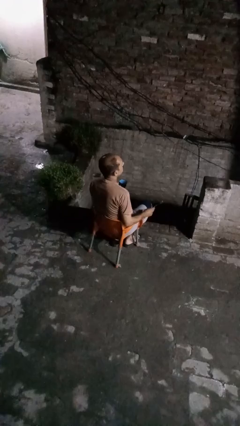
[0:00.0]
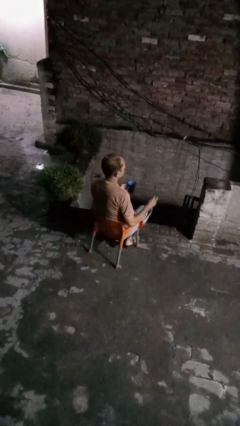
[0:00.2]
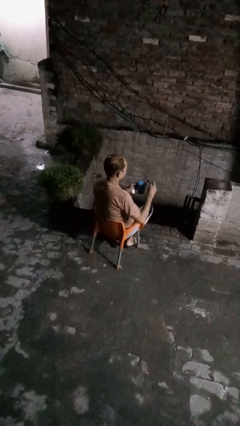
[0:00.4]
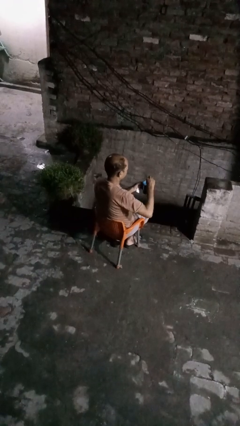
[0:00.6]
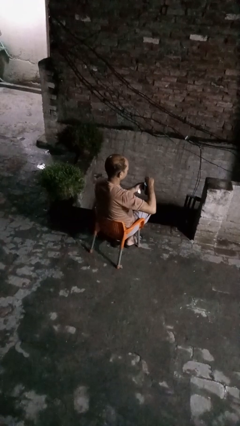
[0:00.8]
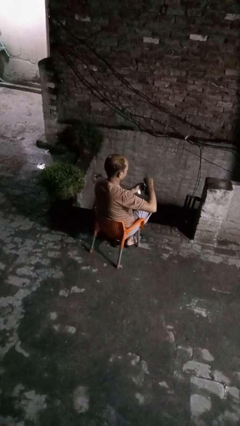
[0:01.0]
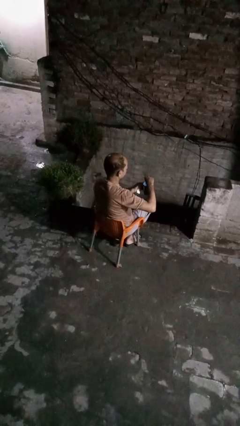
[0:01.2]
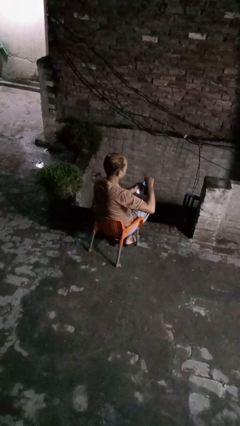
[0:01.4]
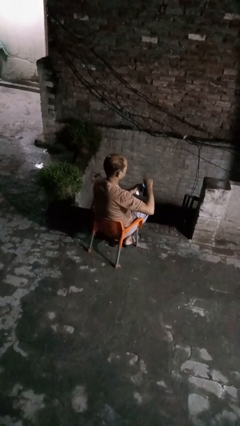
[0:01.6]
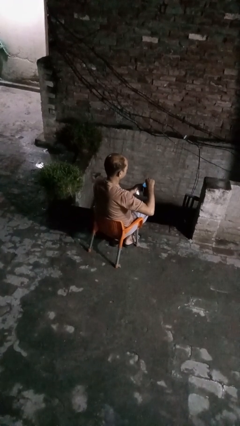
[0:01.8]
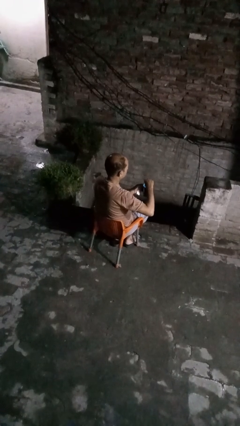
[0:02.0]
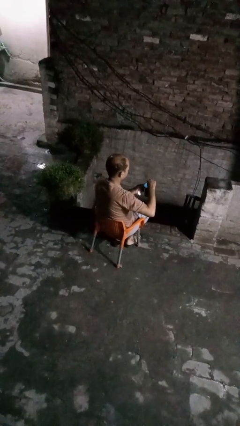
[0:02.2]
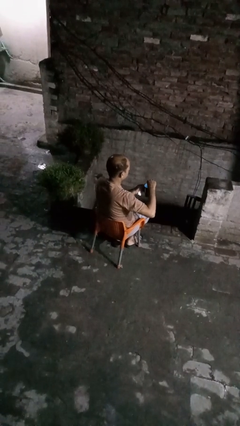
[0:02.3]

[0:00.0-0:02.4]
person stirs mug

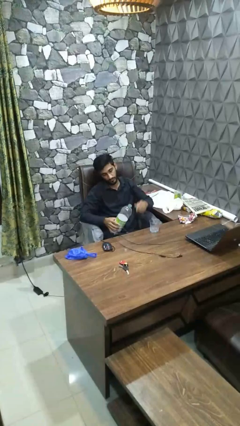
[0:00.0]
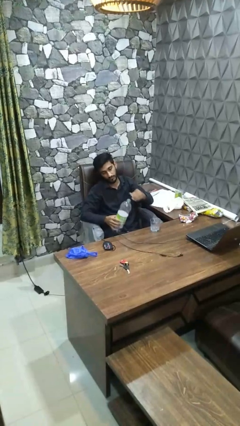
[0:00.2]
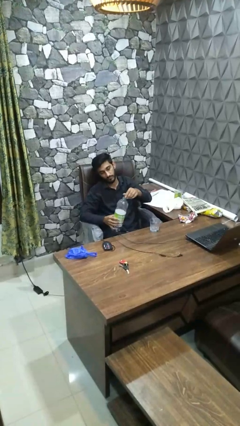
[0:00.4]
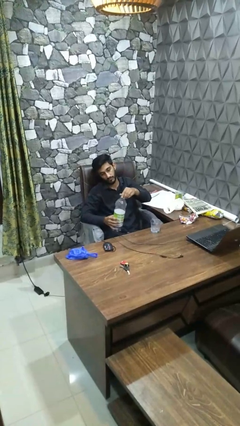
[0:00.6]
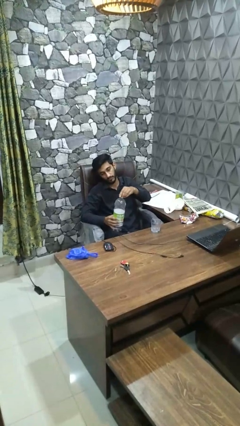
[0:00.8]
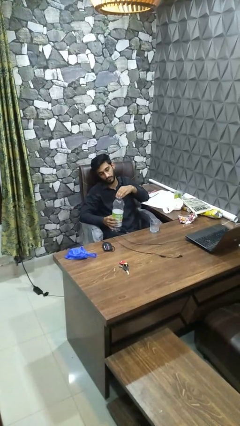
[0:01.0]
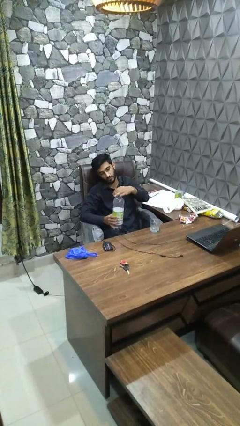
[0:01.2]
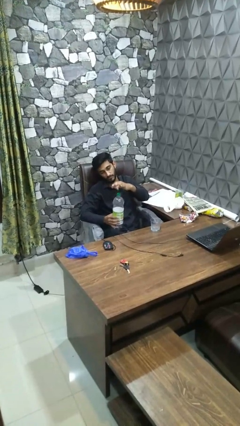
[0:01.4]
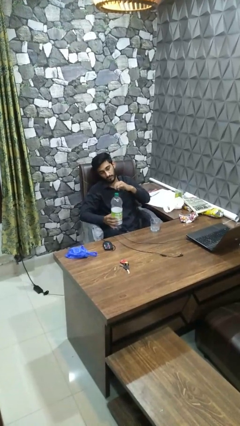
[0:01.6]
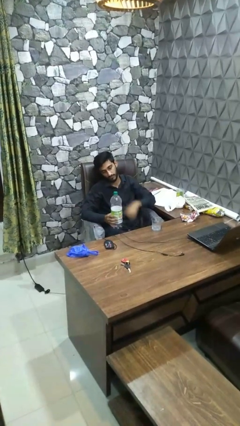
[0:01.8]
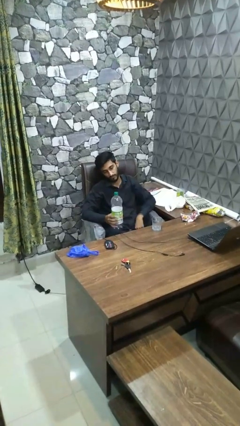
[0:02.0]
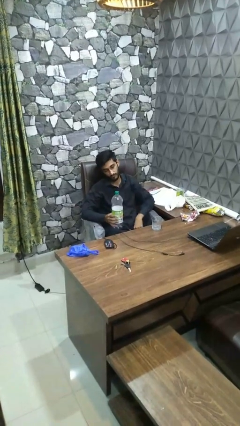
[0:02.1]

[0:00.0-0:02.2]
person screws lid to bottle

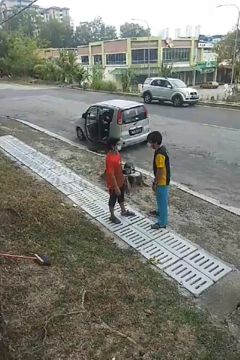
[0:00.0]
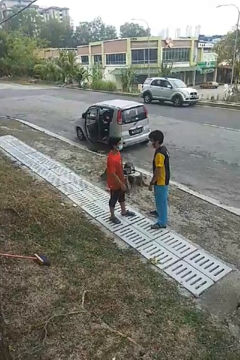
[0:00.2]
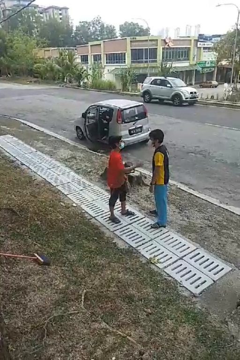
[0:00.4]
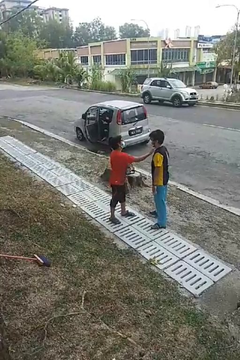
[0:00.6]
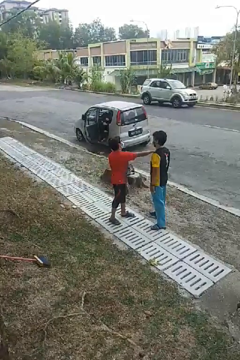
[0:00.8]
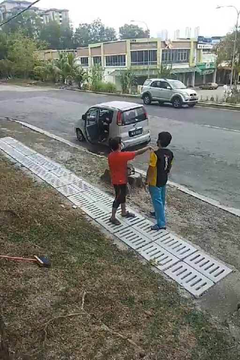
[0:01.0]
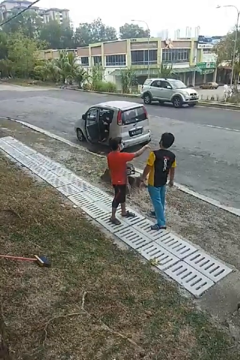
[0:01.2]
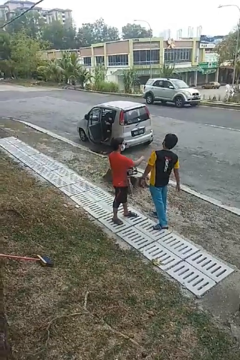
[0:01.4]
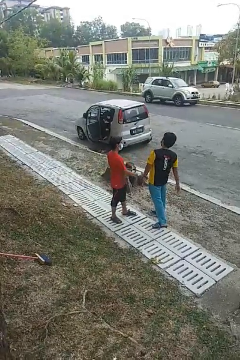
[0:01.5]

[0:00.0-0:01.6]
person shoves person

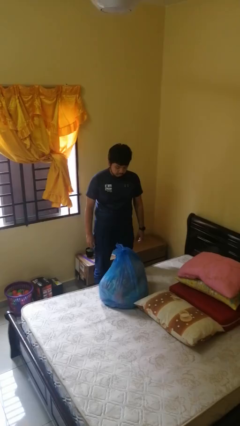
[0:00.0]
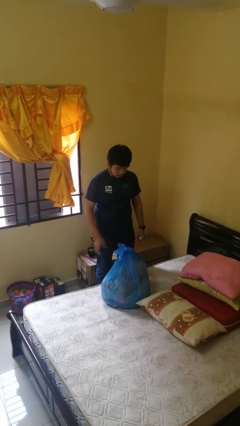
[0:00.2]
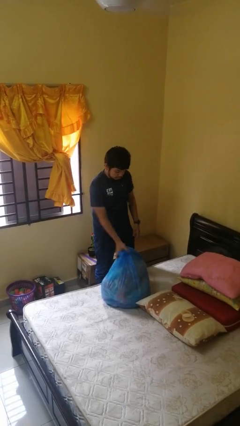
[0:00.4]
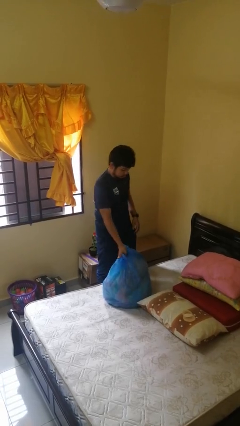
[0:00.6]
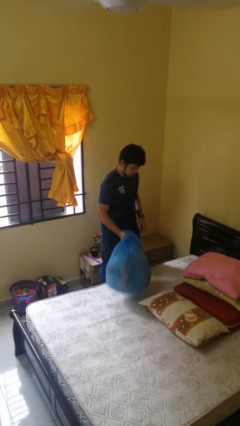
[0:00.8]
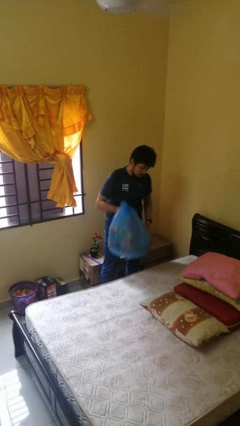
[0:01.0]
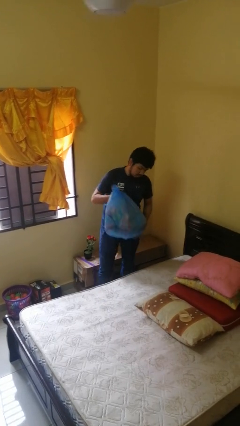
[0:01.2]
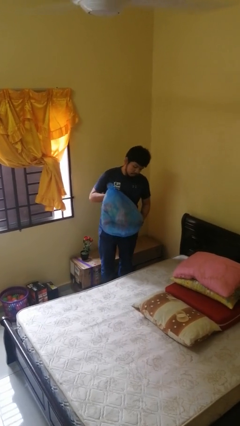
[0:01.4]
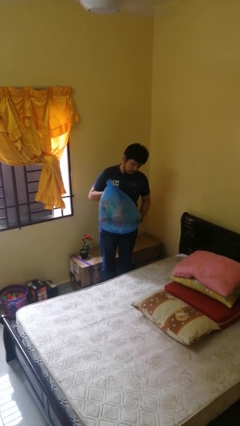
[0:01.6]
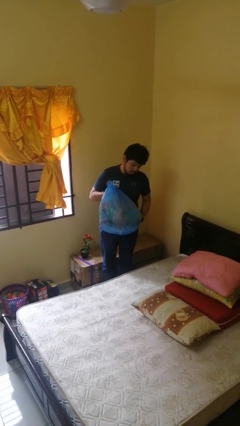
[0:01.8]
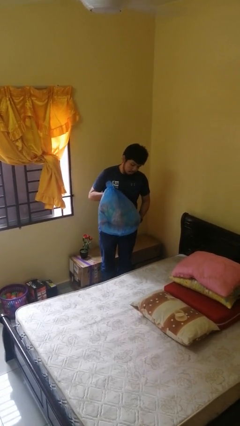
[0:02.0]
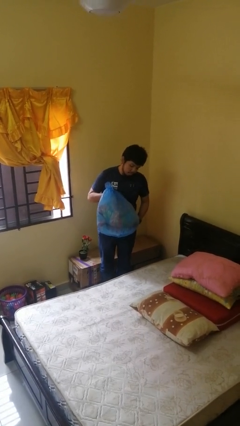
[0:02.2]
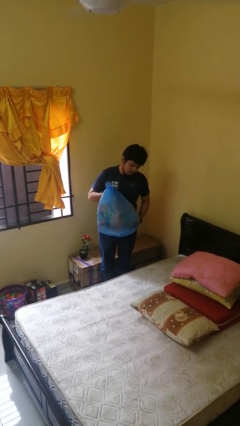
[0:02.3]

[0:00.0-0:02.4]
person picks up object from bed

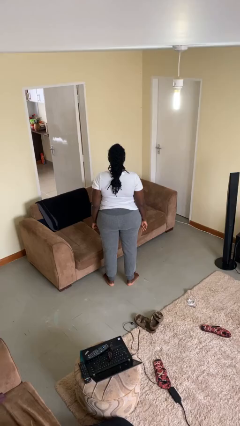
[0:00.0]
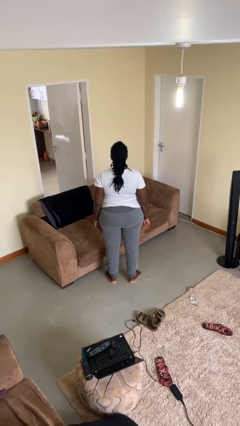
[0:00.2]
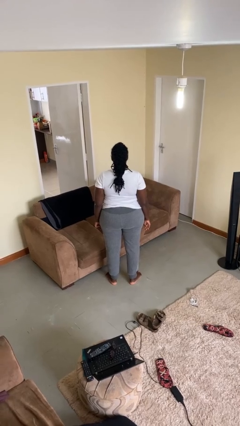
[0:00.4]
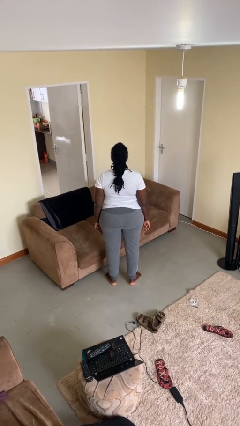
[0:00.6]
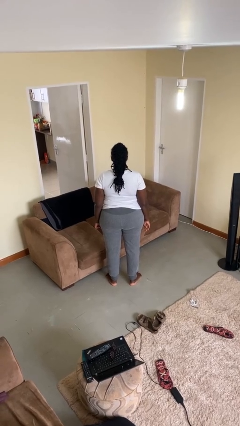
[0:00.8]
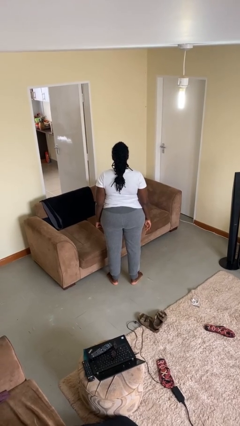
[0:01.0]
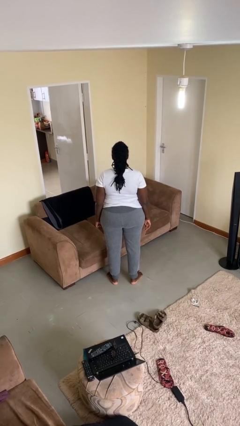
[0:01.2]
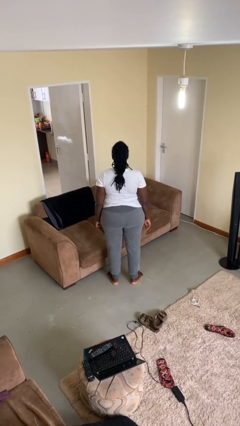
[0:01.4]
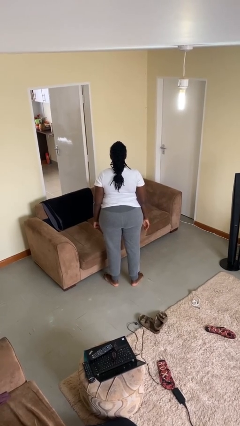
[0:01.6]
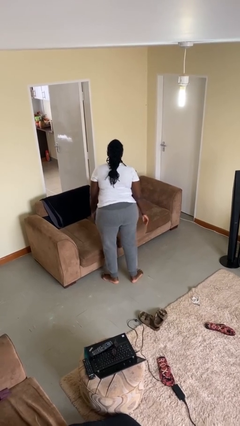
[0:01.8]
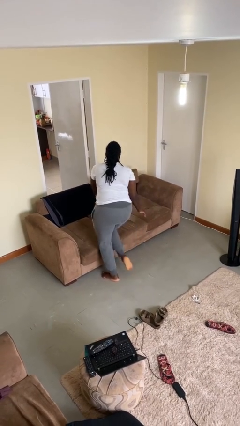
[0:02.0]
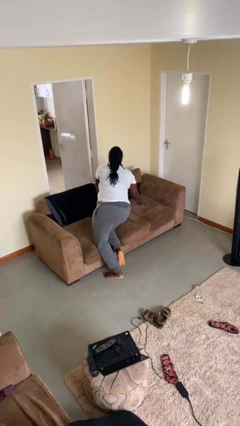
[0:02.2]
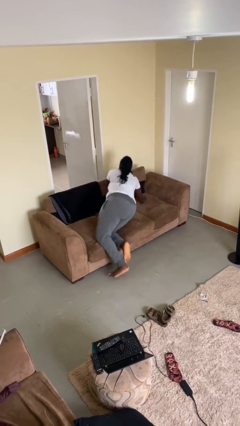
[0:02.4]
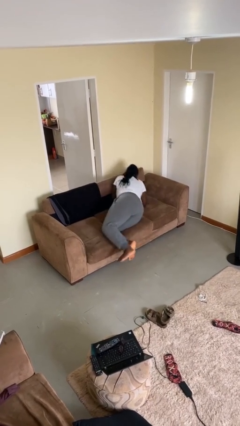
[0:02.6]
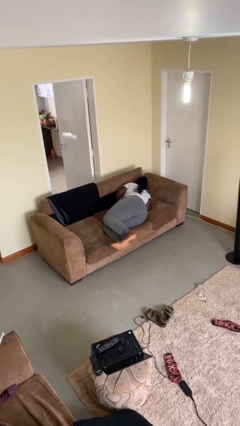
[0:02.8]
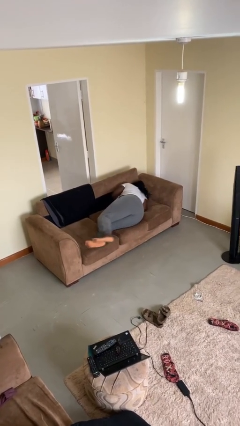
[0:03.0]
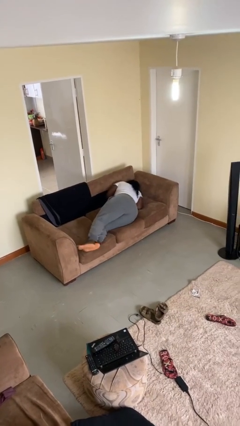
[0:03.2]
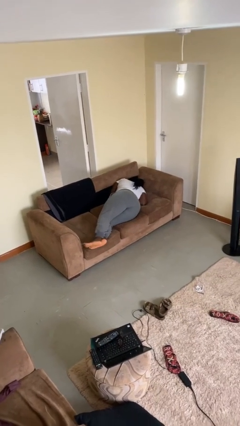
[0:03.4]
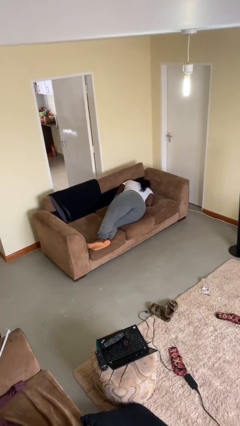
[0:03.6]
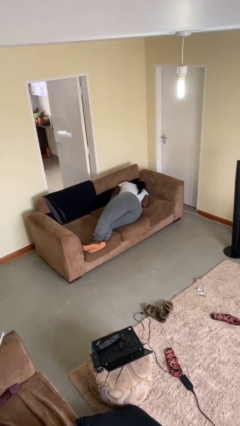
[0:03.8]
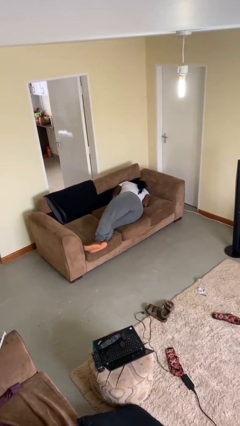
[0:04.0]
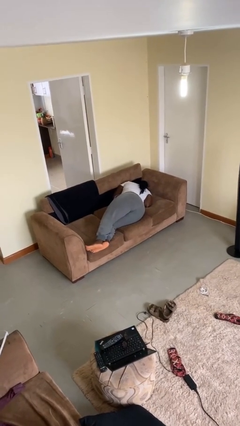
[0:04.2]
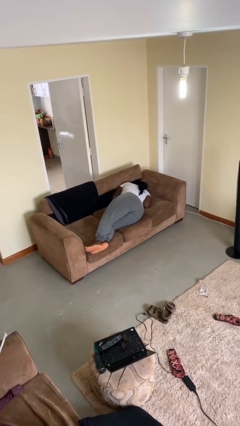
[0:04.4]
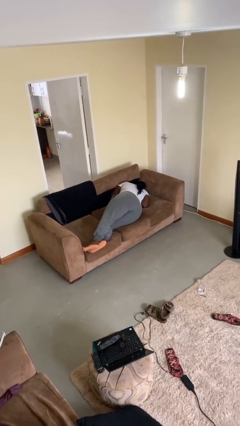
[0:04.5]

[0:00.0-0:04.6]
person lies down on couch

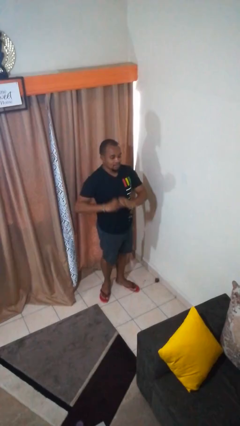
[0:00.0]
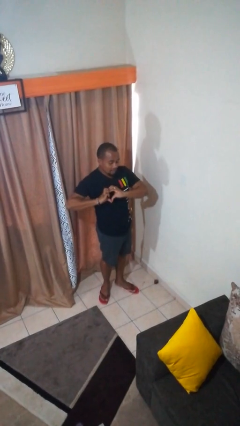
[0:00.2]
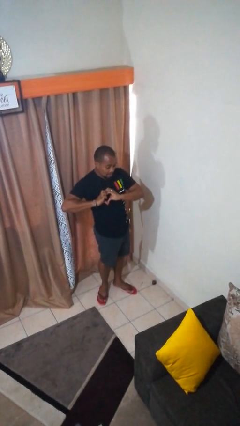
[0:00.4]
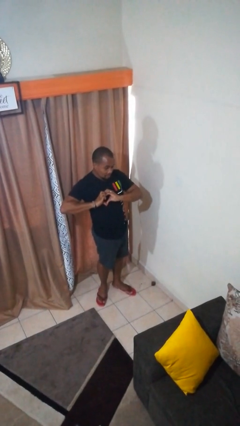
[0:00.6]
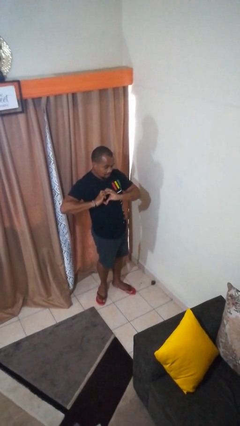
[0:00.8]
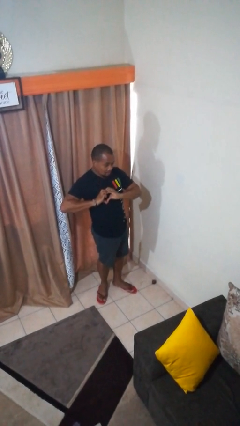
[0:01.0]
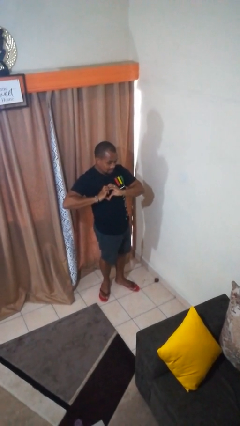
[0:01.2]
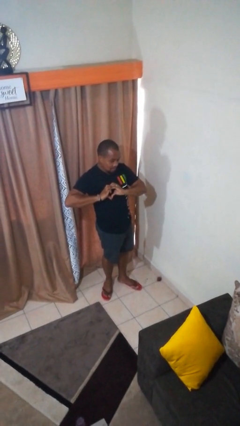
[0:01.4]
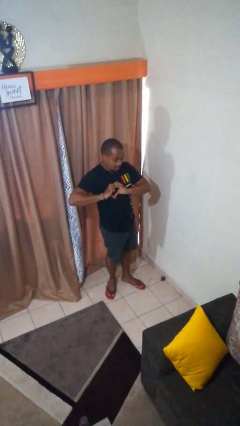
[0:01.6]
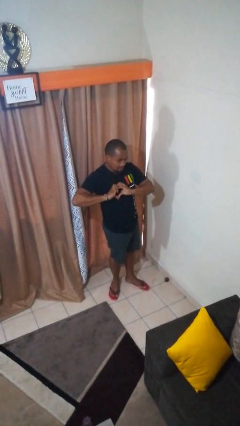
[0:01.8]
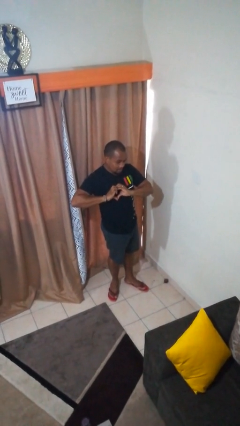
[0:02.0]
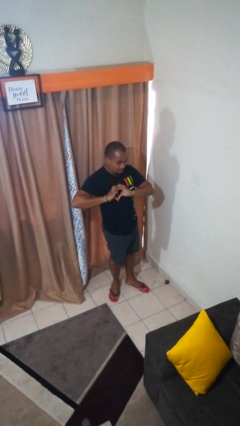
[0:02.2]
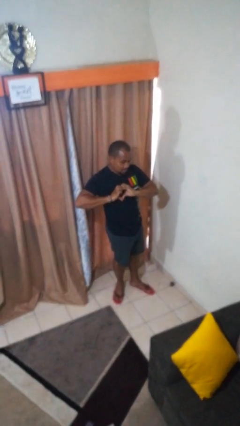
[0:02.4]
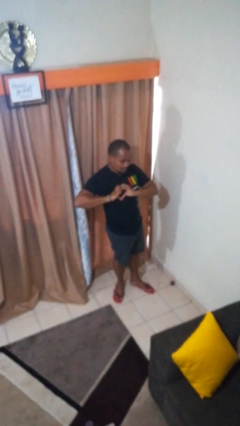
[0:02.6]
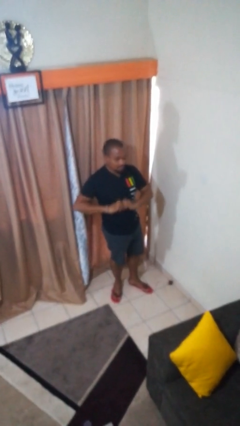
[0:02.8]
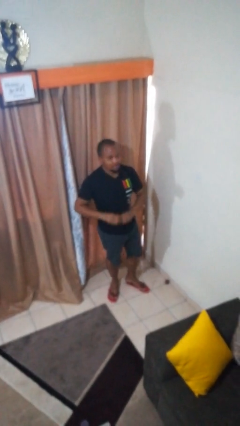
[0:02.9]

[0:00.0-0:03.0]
person gestures heart

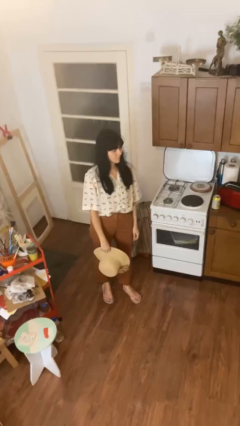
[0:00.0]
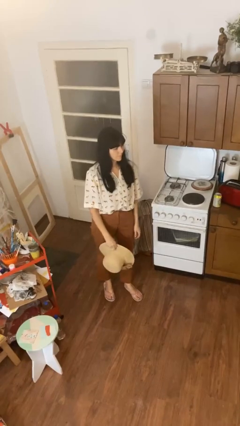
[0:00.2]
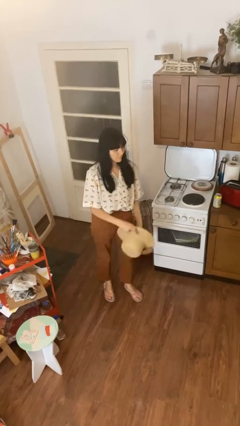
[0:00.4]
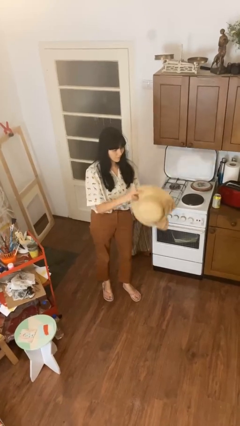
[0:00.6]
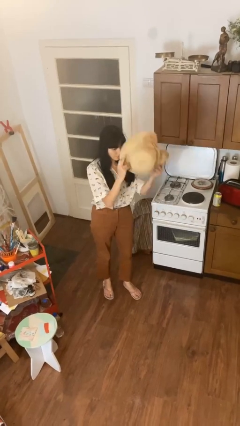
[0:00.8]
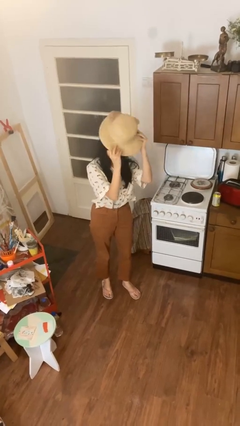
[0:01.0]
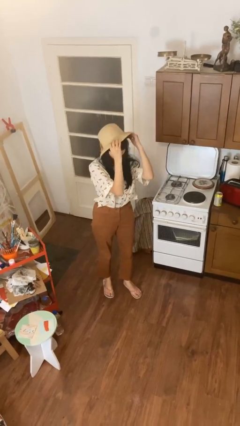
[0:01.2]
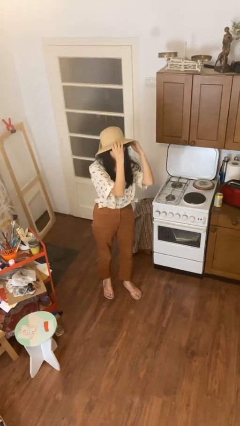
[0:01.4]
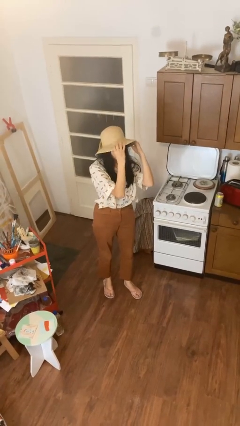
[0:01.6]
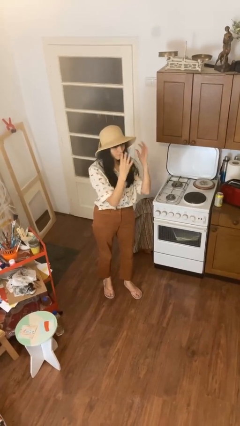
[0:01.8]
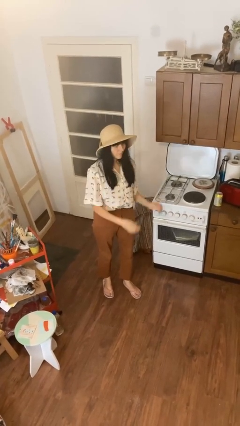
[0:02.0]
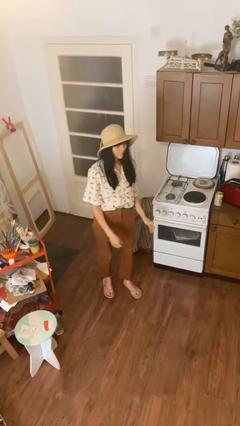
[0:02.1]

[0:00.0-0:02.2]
person puts on hat
